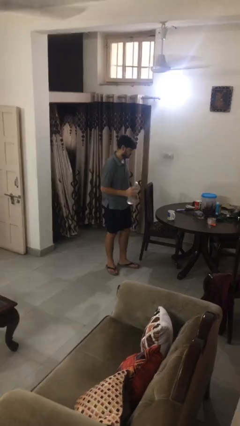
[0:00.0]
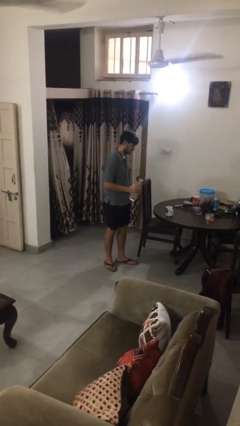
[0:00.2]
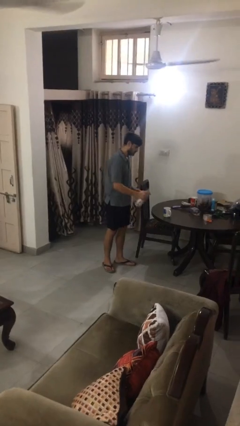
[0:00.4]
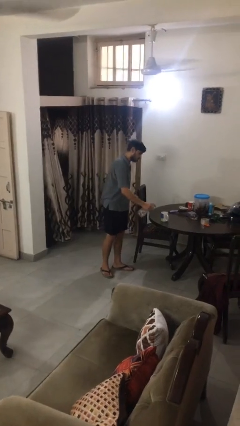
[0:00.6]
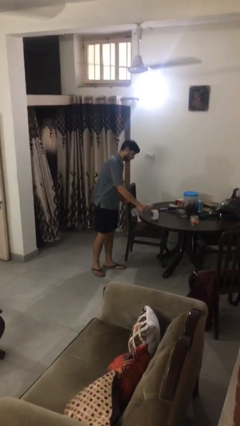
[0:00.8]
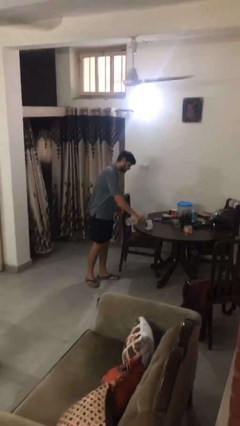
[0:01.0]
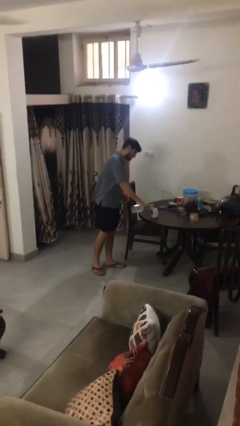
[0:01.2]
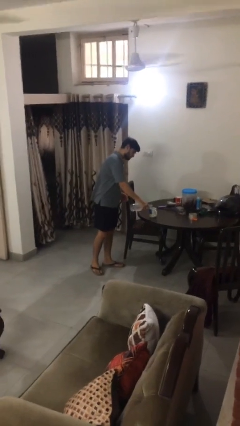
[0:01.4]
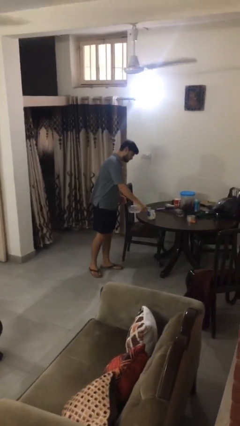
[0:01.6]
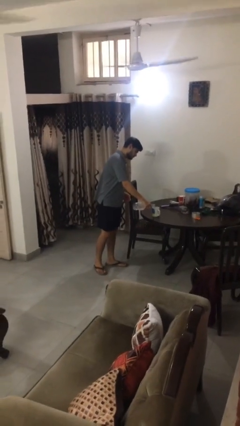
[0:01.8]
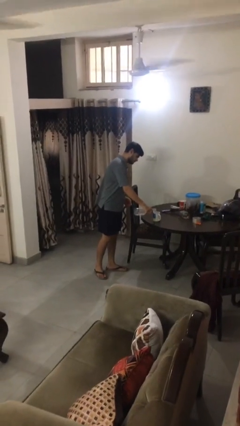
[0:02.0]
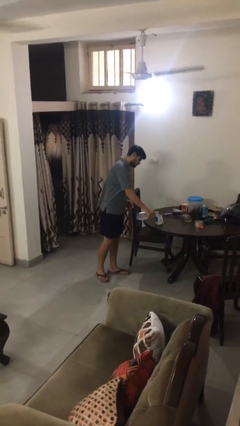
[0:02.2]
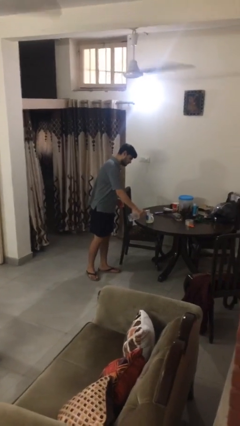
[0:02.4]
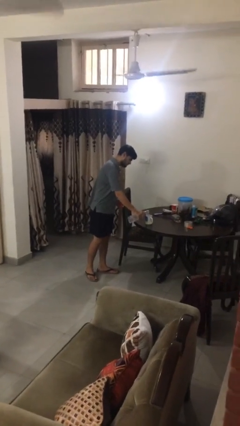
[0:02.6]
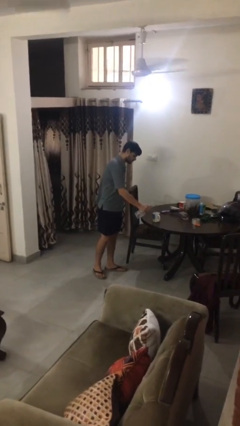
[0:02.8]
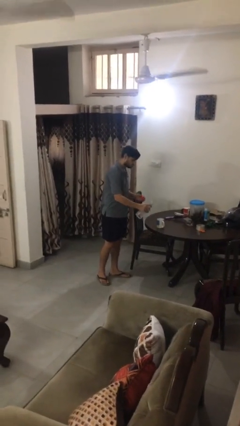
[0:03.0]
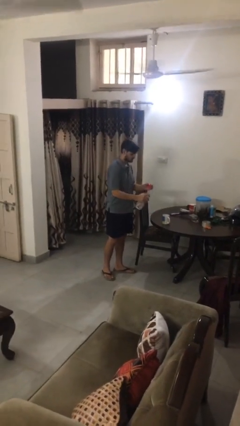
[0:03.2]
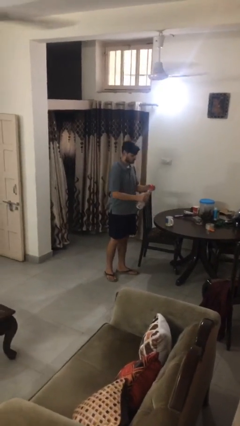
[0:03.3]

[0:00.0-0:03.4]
person pours liquid into cup

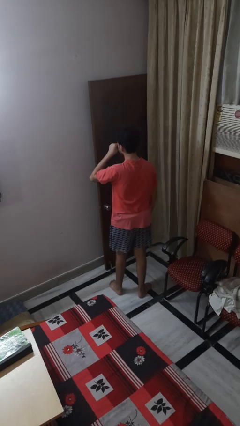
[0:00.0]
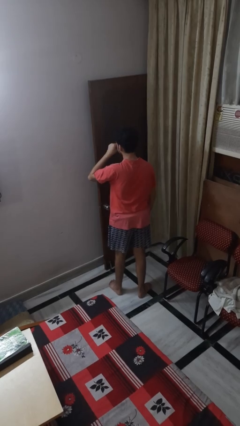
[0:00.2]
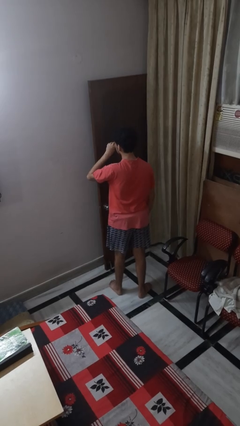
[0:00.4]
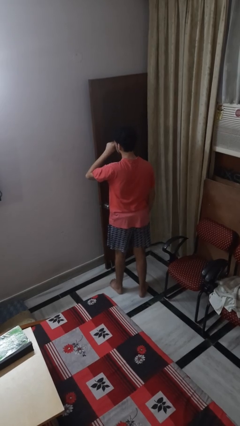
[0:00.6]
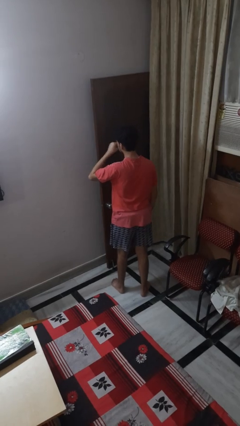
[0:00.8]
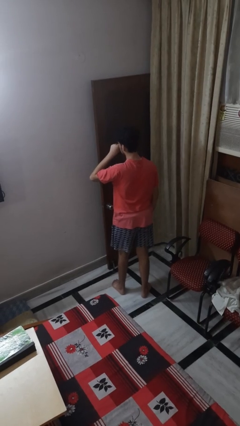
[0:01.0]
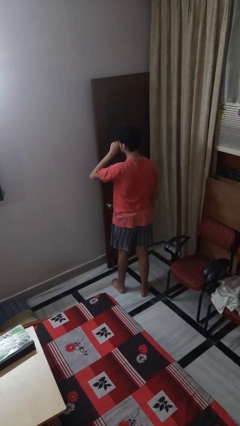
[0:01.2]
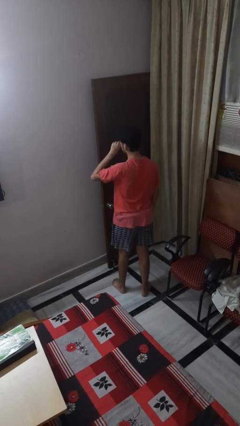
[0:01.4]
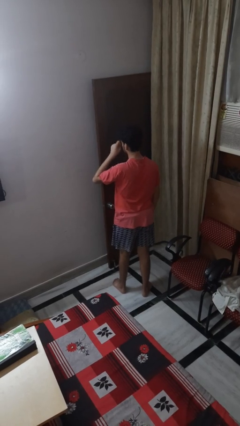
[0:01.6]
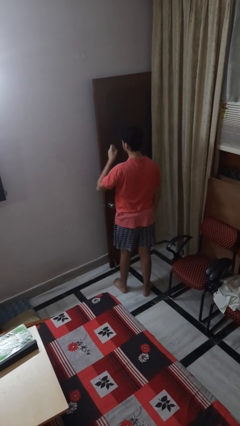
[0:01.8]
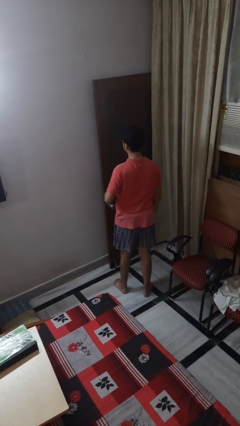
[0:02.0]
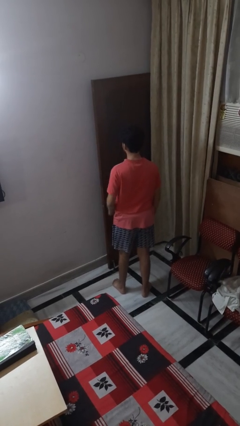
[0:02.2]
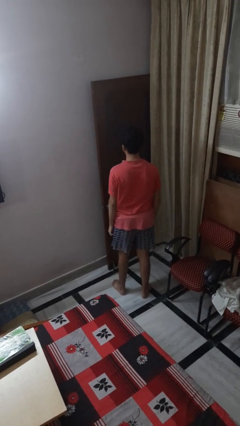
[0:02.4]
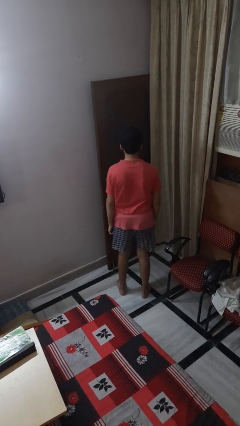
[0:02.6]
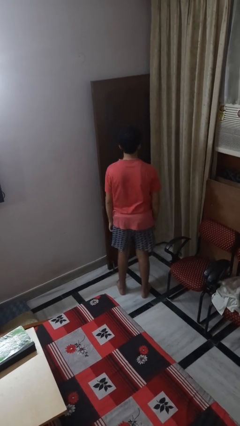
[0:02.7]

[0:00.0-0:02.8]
person rubs eyes

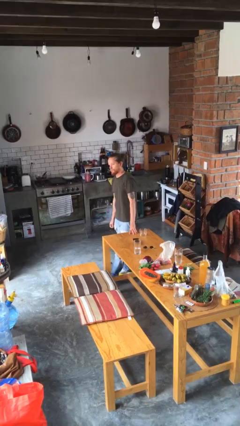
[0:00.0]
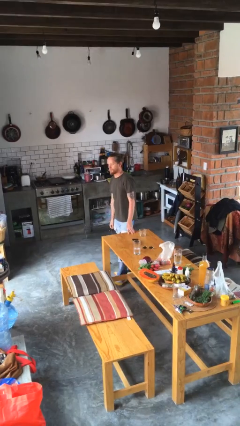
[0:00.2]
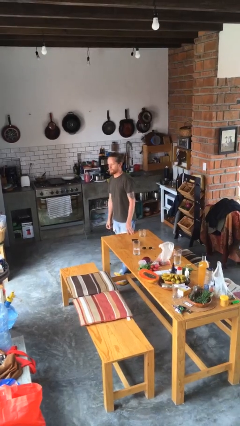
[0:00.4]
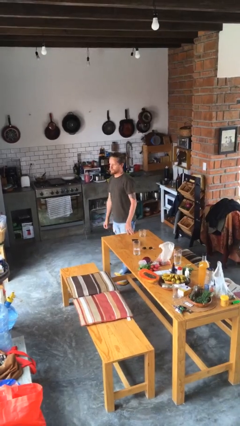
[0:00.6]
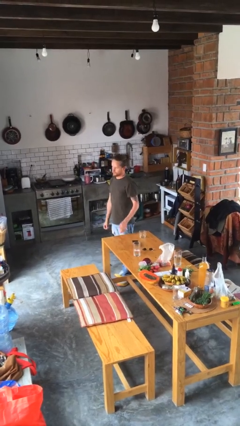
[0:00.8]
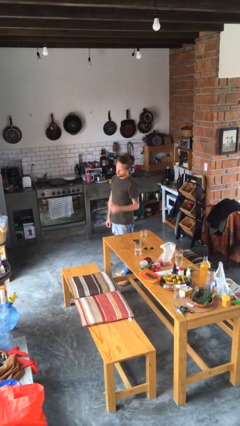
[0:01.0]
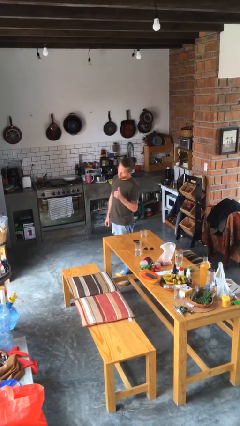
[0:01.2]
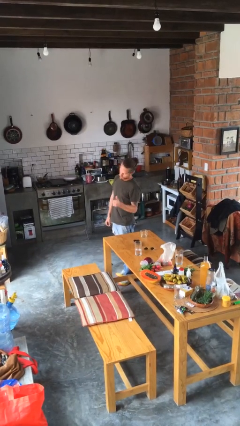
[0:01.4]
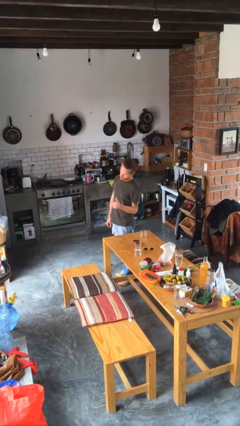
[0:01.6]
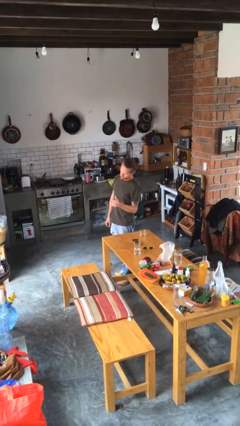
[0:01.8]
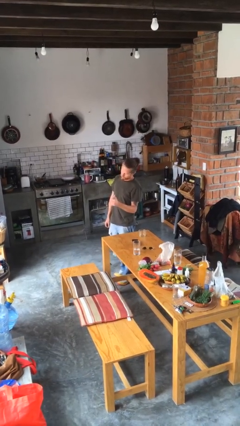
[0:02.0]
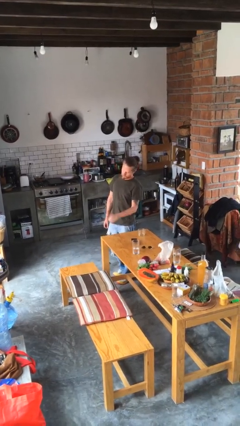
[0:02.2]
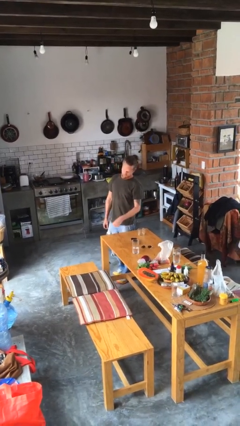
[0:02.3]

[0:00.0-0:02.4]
person gestures thumbs up

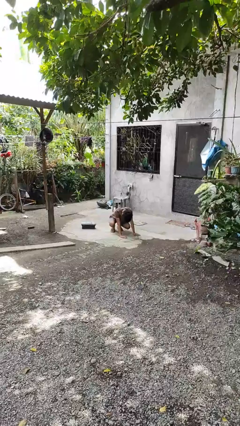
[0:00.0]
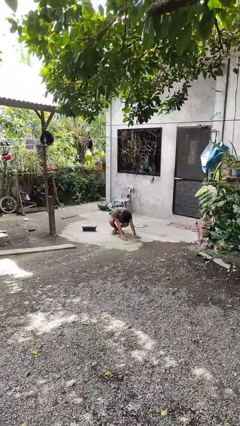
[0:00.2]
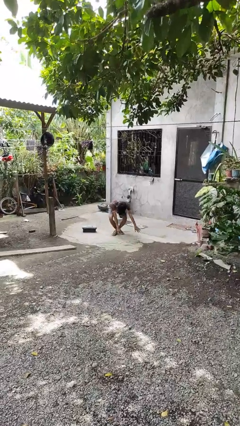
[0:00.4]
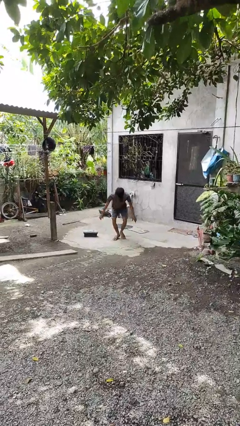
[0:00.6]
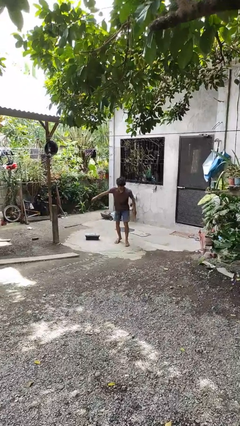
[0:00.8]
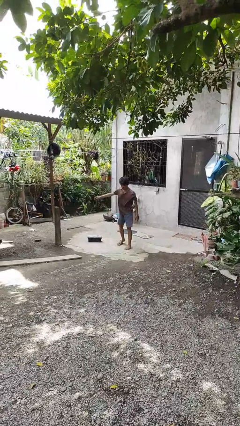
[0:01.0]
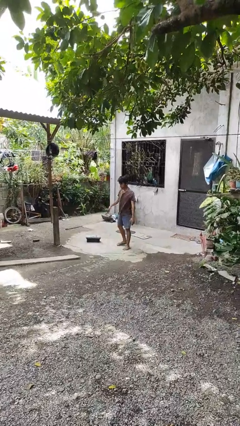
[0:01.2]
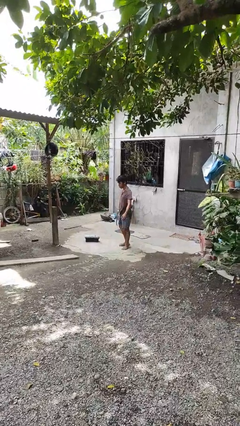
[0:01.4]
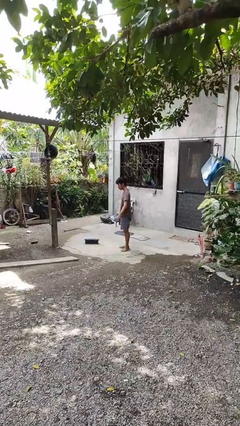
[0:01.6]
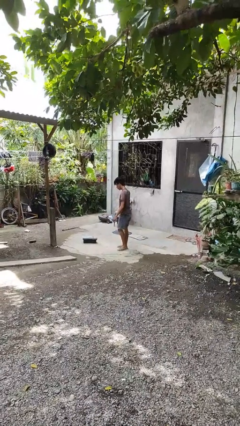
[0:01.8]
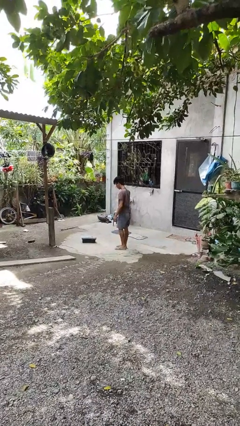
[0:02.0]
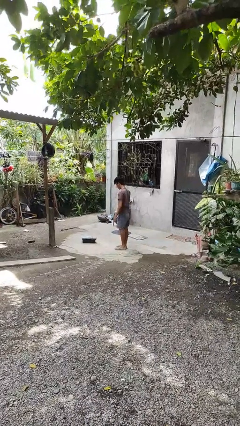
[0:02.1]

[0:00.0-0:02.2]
person stands up from floor

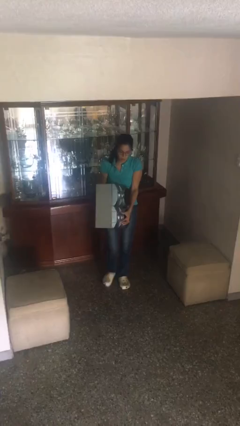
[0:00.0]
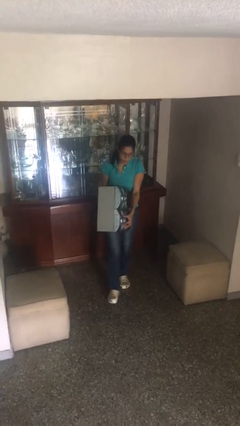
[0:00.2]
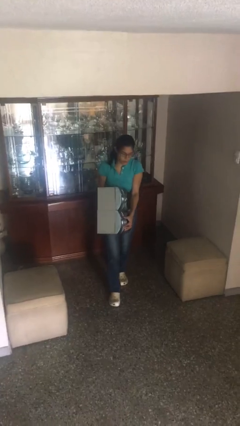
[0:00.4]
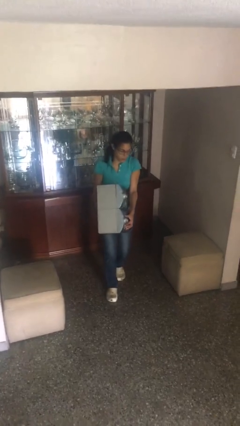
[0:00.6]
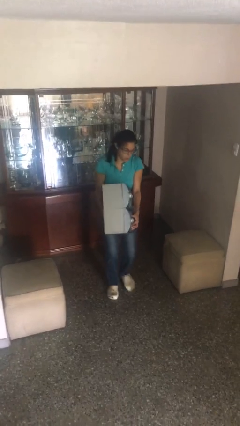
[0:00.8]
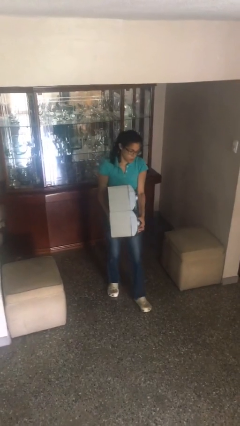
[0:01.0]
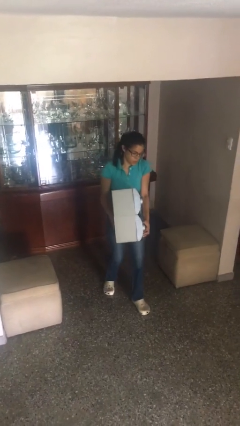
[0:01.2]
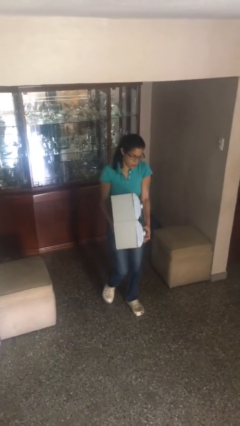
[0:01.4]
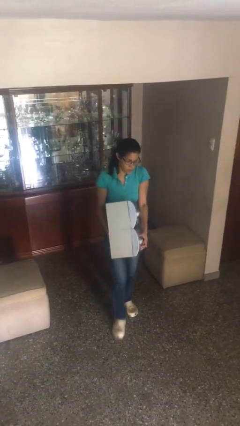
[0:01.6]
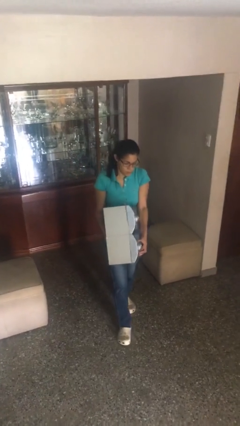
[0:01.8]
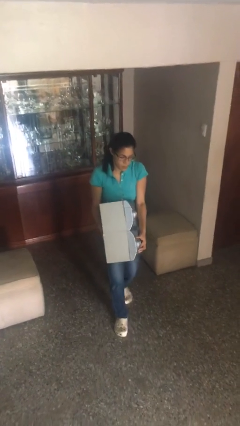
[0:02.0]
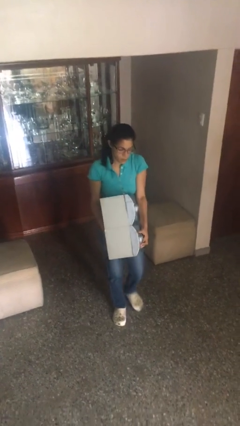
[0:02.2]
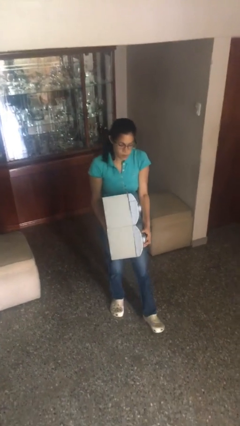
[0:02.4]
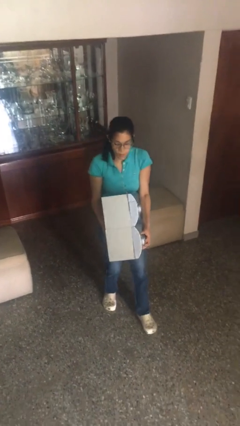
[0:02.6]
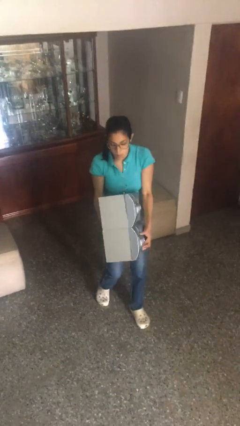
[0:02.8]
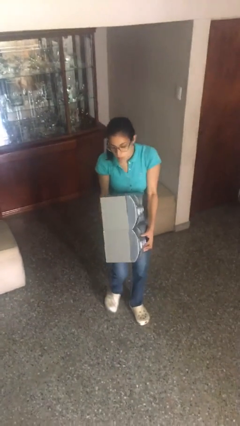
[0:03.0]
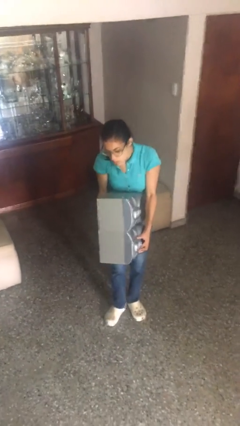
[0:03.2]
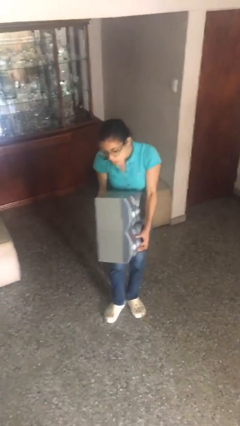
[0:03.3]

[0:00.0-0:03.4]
person carries heavy object

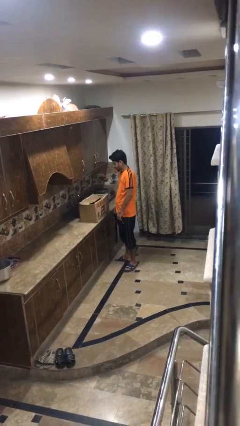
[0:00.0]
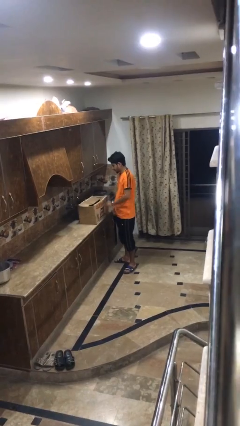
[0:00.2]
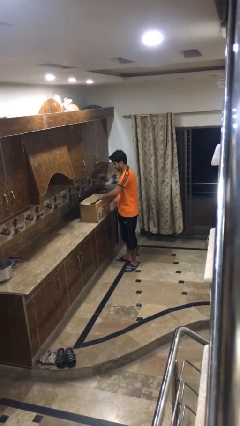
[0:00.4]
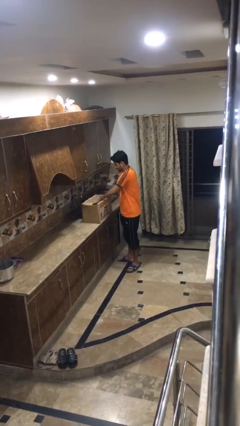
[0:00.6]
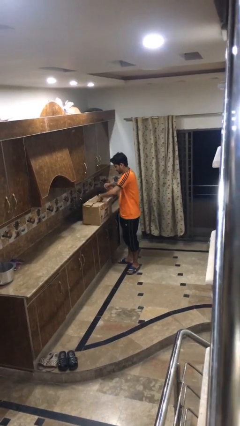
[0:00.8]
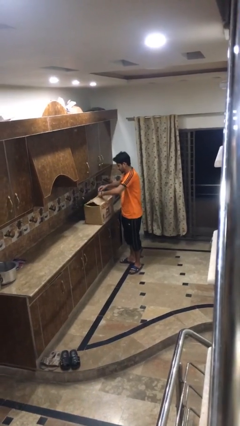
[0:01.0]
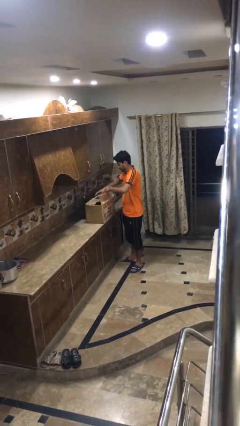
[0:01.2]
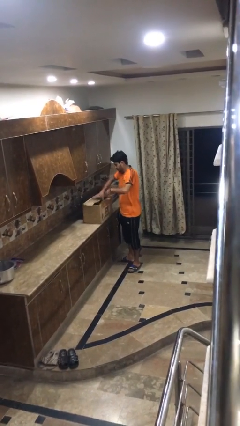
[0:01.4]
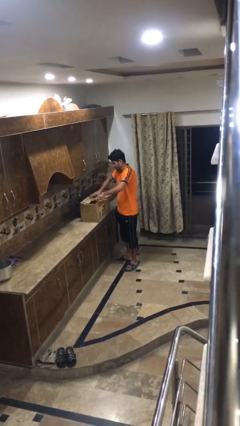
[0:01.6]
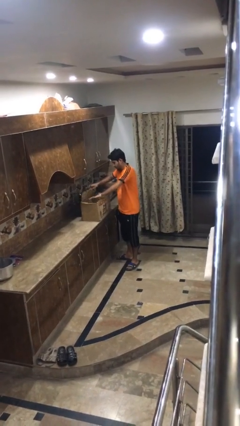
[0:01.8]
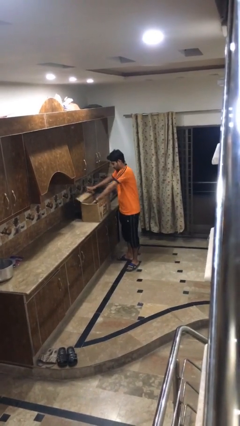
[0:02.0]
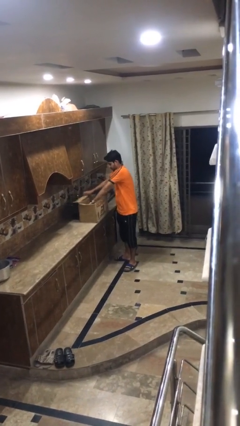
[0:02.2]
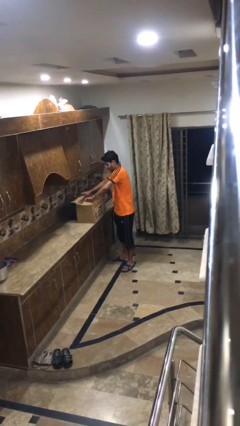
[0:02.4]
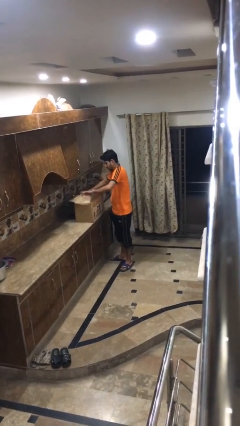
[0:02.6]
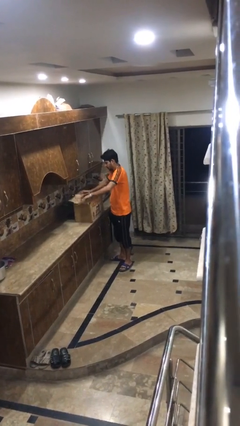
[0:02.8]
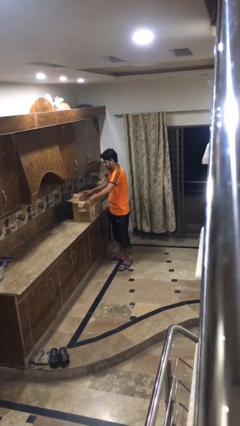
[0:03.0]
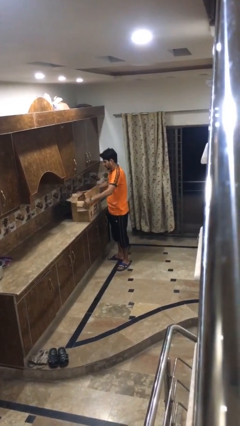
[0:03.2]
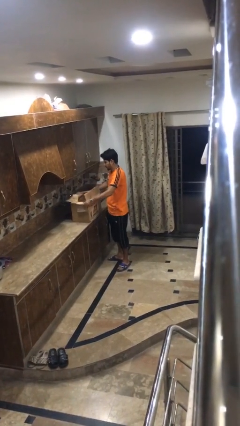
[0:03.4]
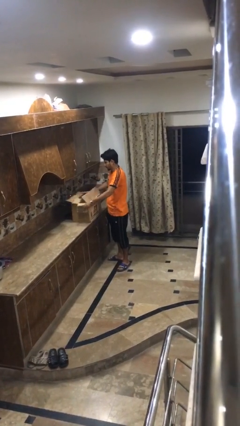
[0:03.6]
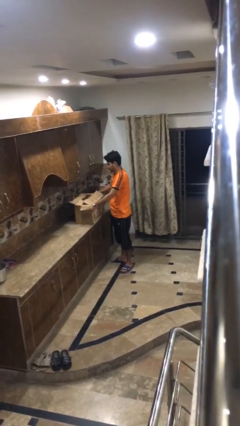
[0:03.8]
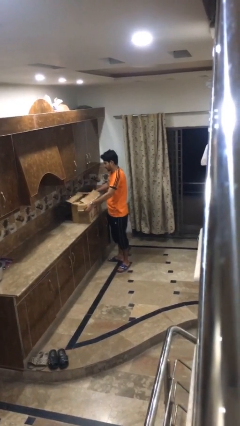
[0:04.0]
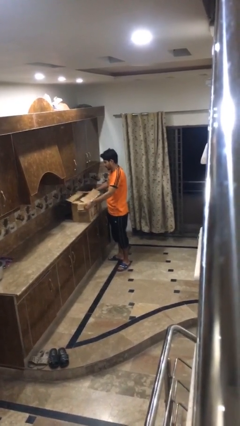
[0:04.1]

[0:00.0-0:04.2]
person opens box
